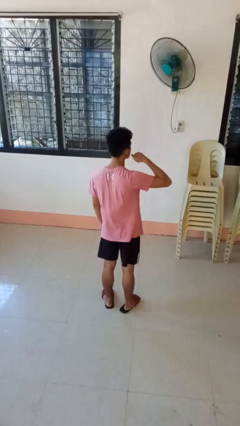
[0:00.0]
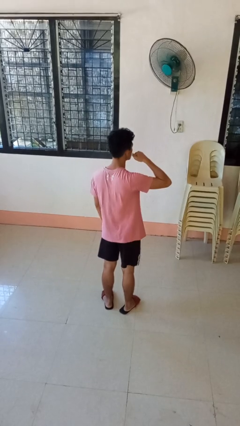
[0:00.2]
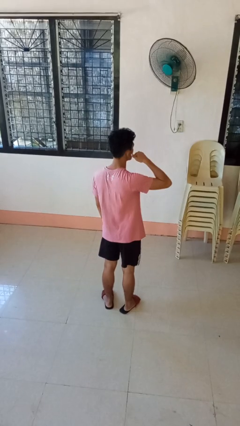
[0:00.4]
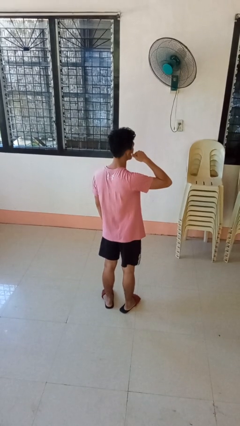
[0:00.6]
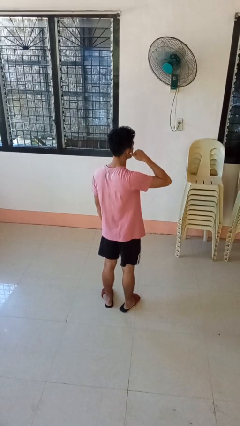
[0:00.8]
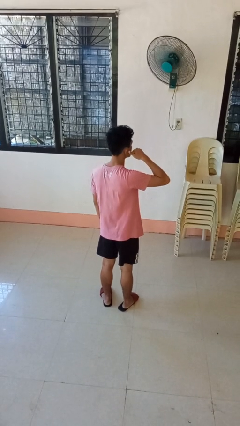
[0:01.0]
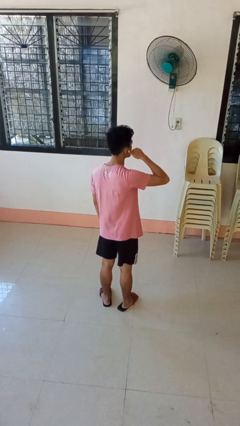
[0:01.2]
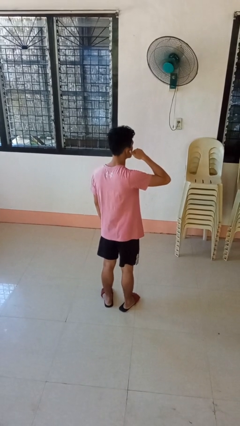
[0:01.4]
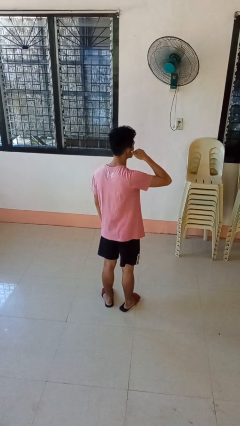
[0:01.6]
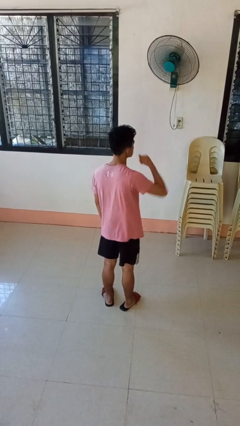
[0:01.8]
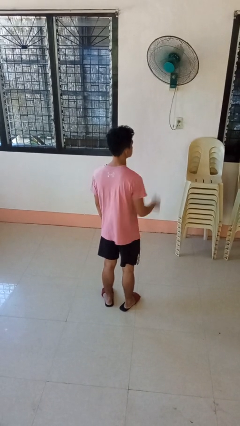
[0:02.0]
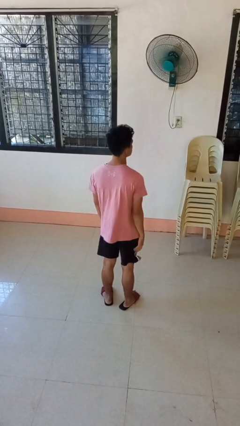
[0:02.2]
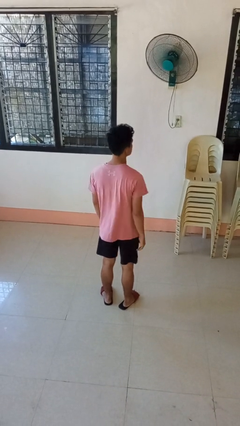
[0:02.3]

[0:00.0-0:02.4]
person gestures call me

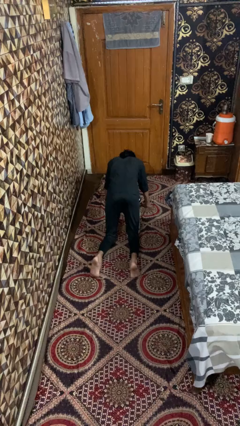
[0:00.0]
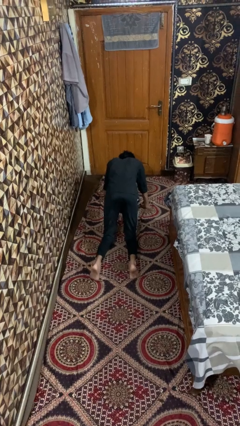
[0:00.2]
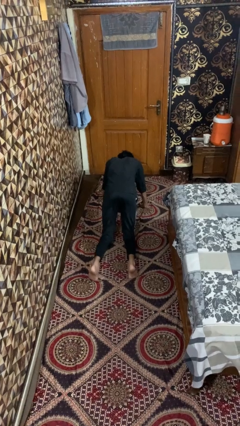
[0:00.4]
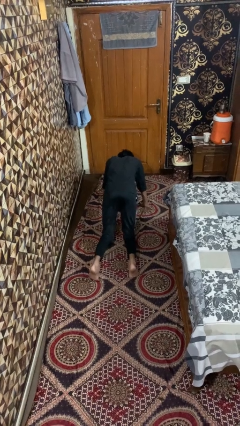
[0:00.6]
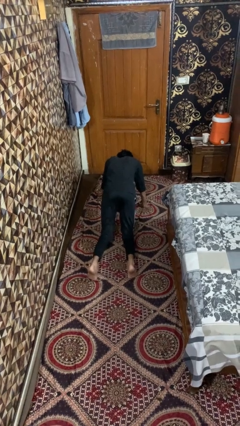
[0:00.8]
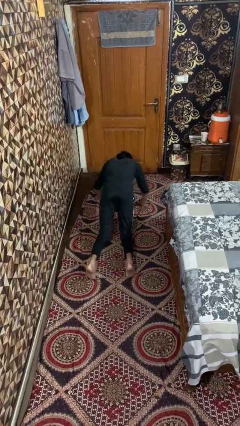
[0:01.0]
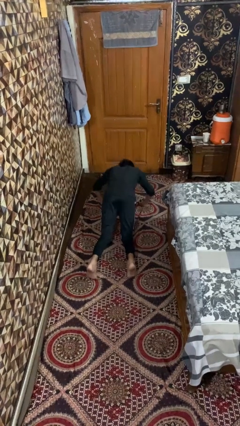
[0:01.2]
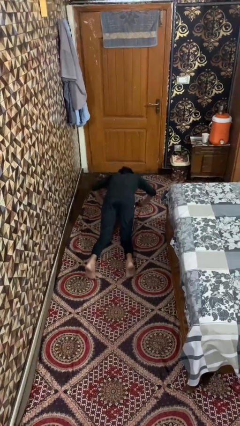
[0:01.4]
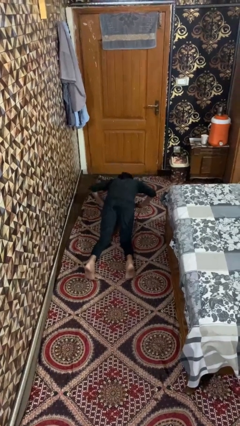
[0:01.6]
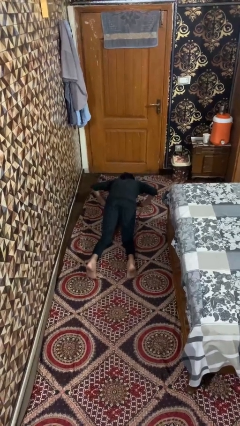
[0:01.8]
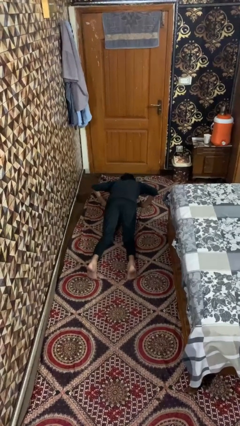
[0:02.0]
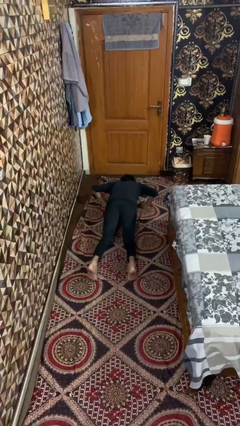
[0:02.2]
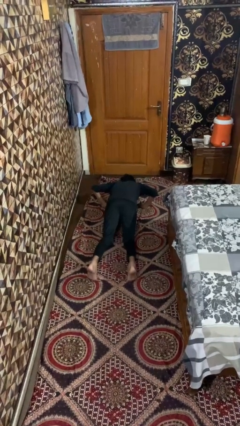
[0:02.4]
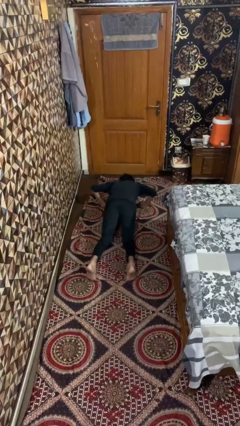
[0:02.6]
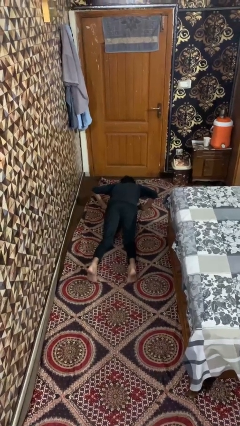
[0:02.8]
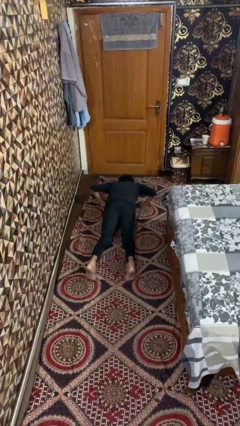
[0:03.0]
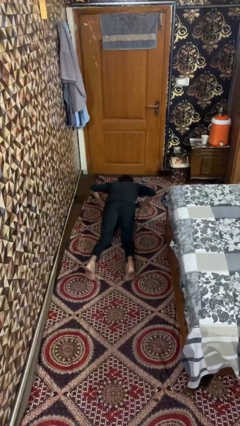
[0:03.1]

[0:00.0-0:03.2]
person exercises with pushup

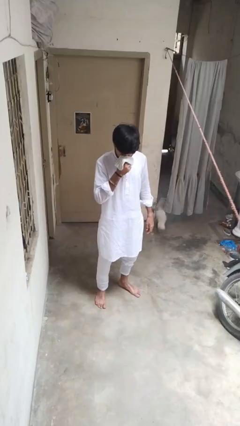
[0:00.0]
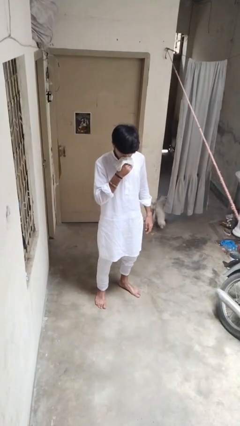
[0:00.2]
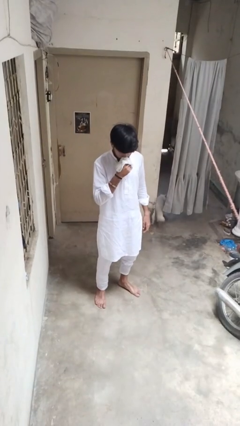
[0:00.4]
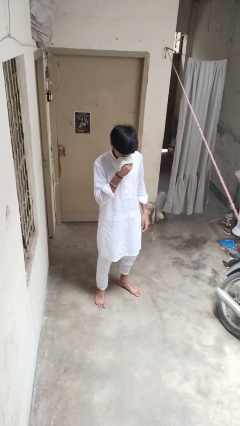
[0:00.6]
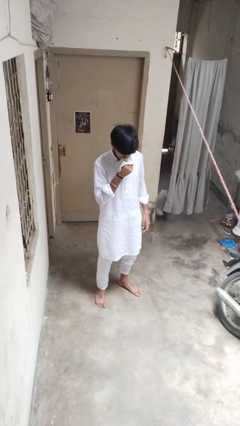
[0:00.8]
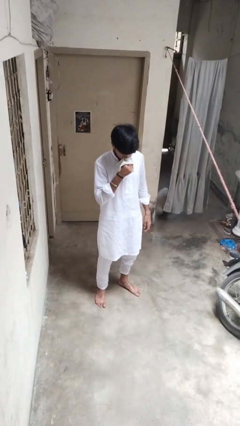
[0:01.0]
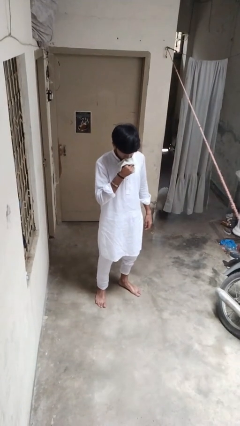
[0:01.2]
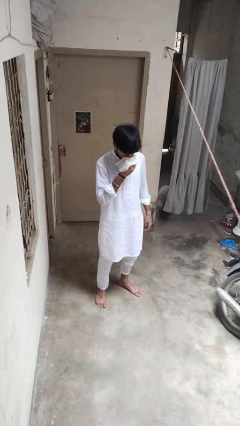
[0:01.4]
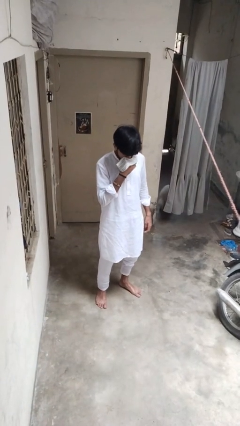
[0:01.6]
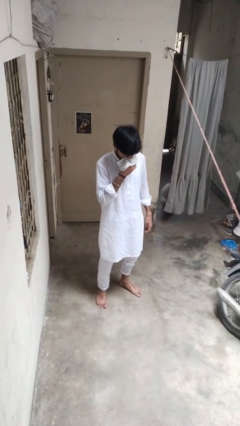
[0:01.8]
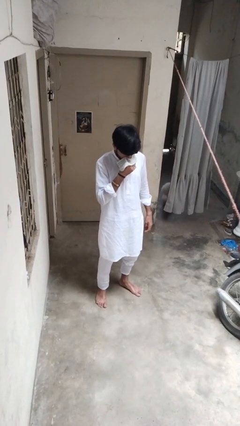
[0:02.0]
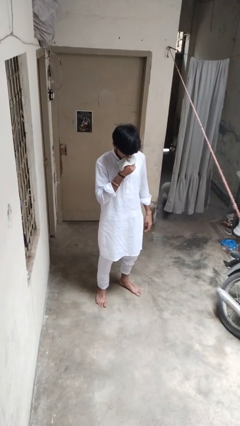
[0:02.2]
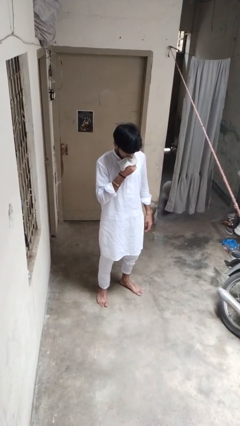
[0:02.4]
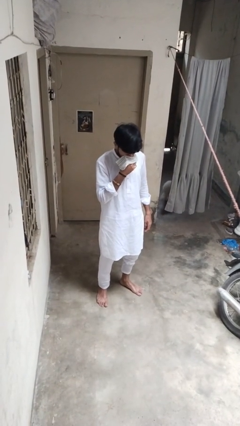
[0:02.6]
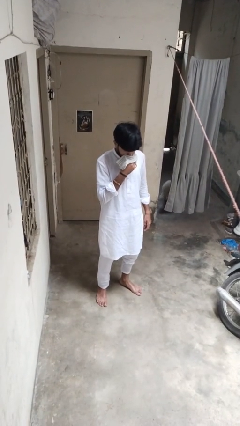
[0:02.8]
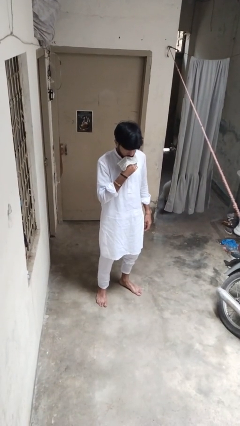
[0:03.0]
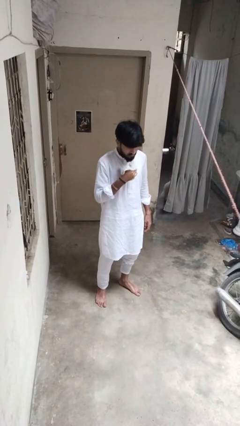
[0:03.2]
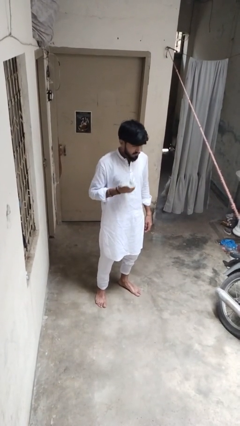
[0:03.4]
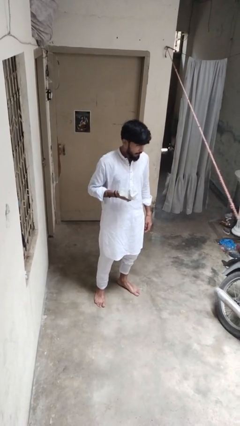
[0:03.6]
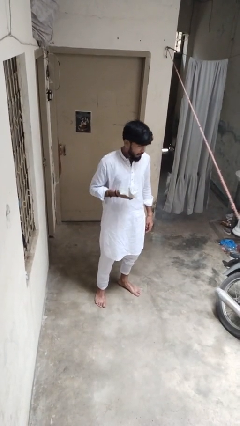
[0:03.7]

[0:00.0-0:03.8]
person blows nose

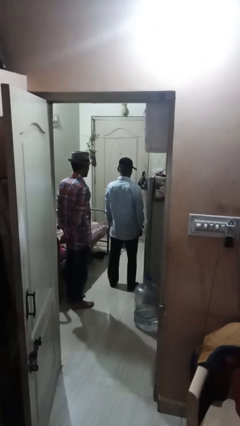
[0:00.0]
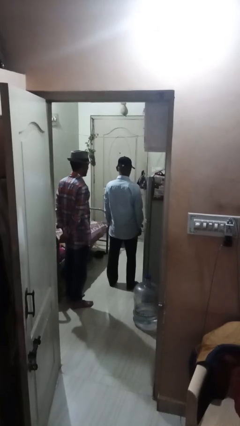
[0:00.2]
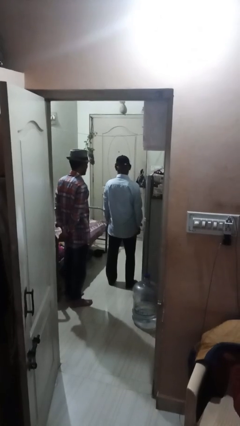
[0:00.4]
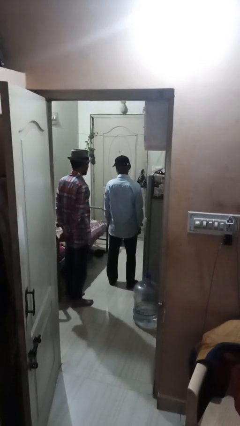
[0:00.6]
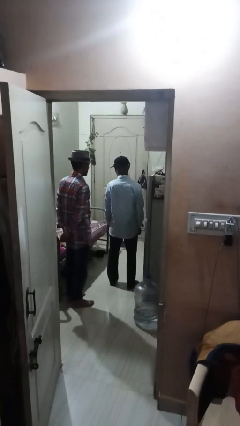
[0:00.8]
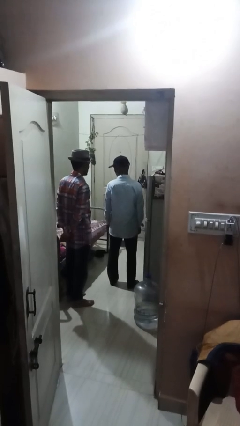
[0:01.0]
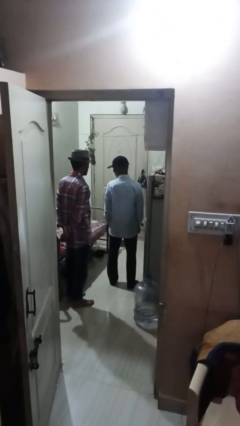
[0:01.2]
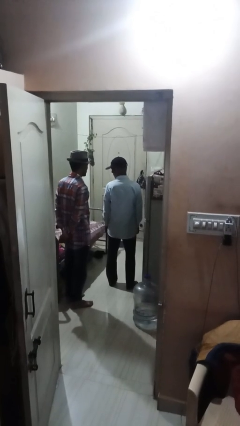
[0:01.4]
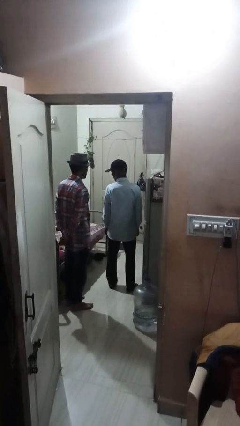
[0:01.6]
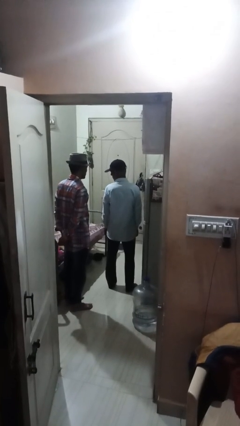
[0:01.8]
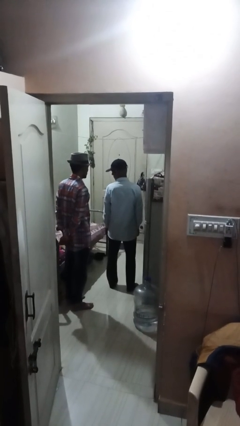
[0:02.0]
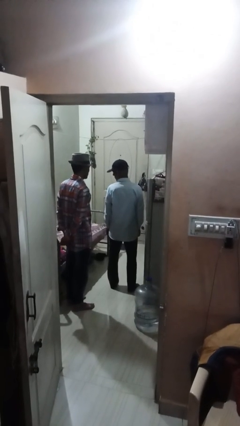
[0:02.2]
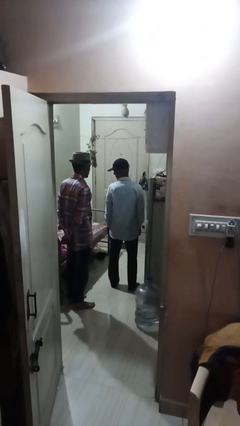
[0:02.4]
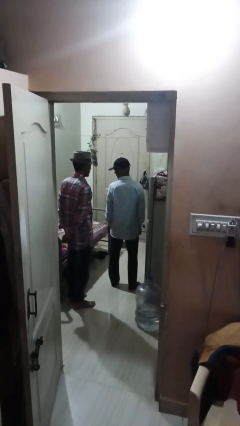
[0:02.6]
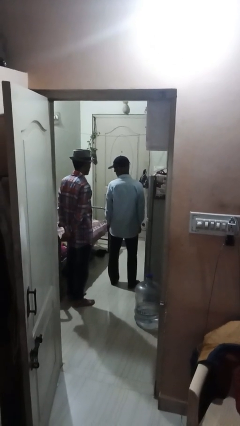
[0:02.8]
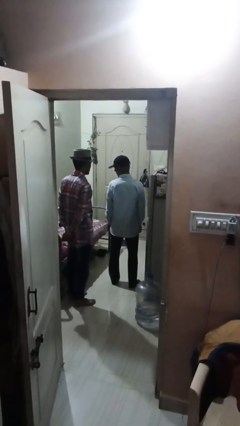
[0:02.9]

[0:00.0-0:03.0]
person looks over shoulder

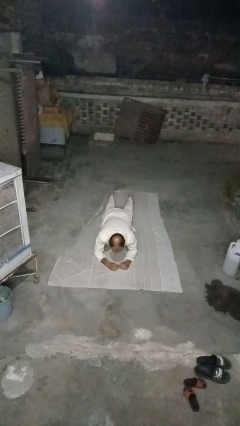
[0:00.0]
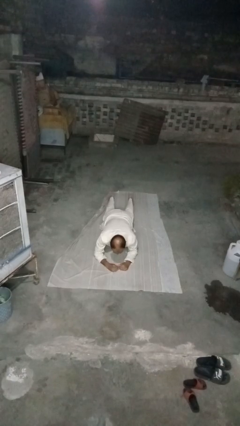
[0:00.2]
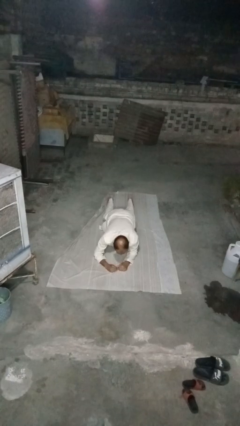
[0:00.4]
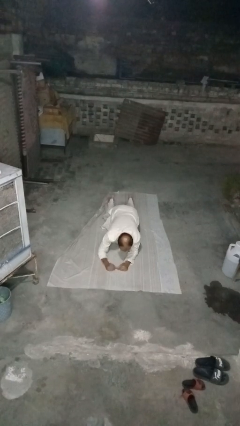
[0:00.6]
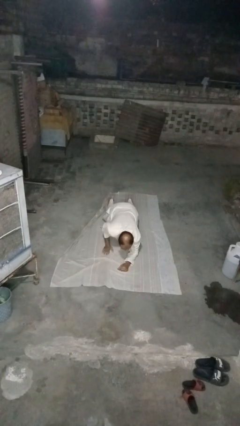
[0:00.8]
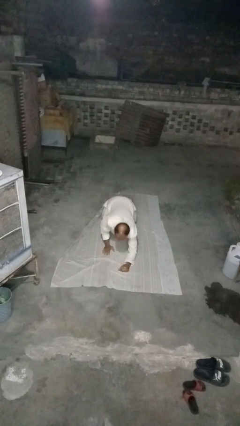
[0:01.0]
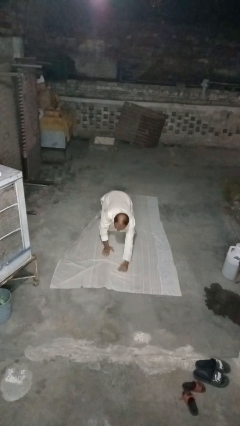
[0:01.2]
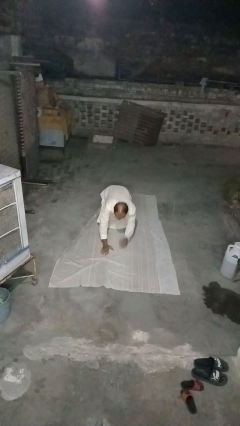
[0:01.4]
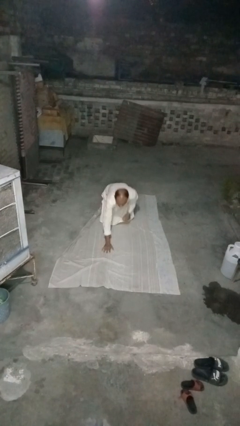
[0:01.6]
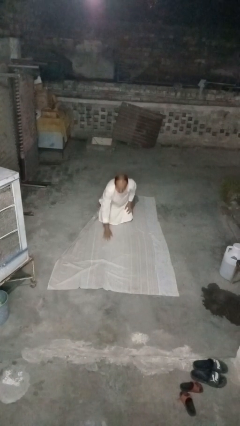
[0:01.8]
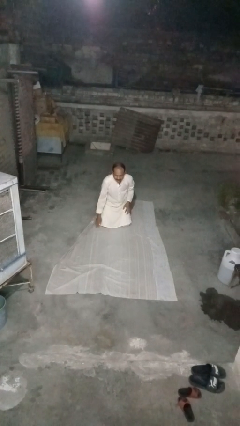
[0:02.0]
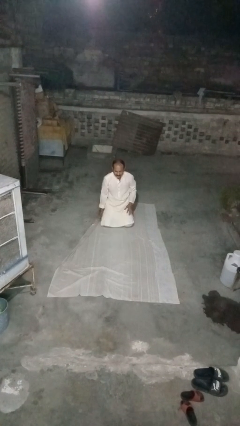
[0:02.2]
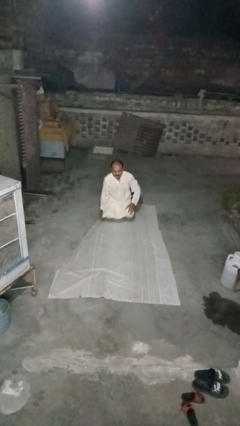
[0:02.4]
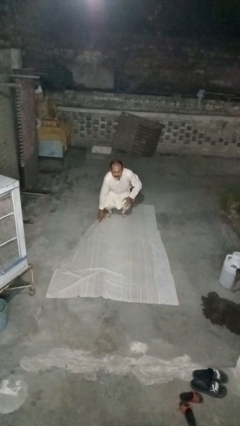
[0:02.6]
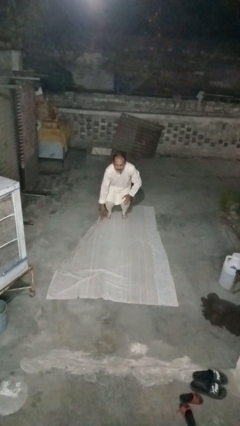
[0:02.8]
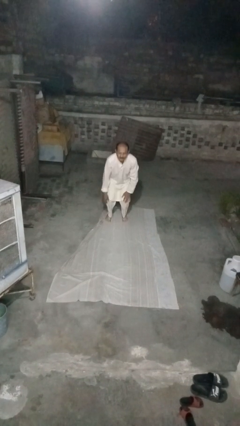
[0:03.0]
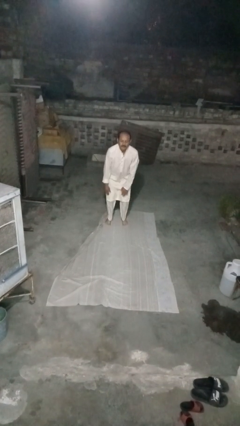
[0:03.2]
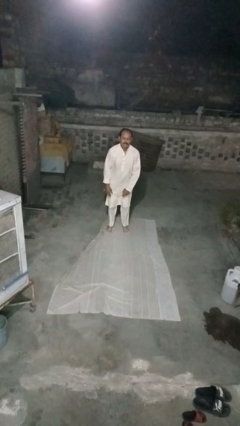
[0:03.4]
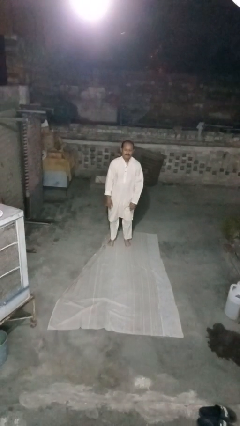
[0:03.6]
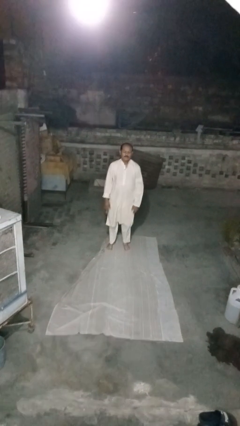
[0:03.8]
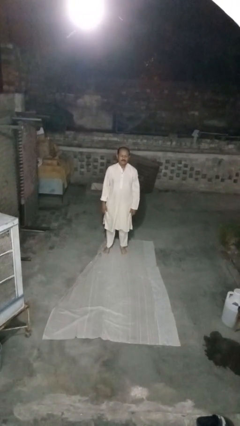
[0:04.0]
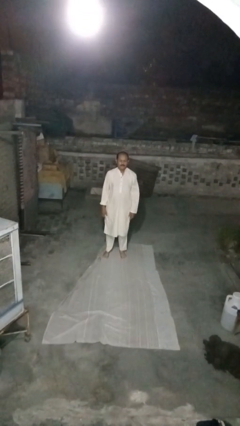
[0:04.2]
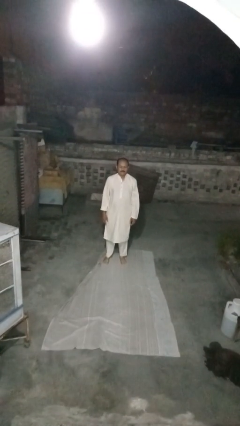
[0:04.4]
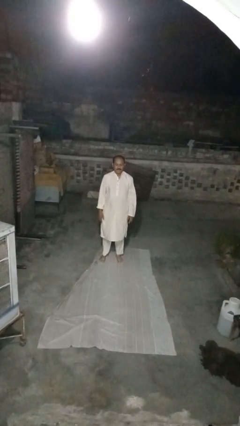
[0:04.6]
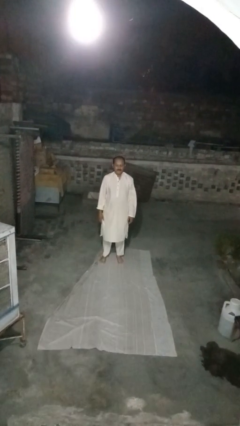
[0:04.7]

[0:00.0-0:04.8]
person stands up from floor
